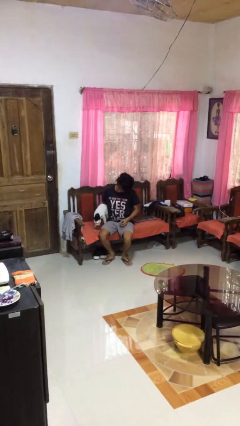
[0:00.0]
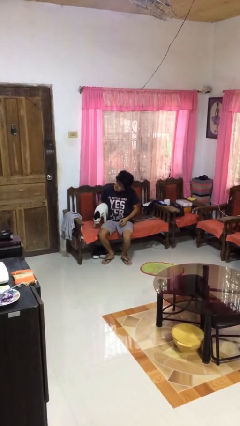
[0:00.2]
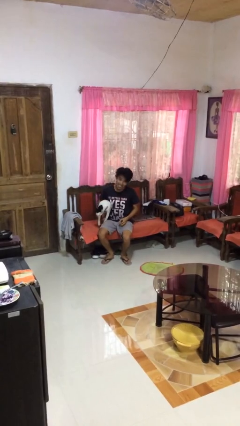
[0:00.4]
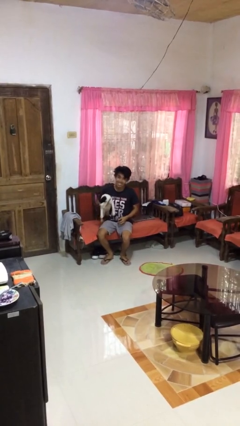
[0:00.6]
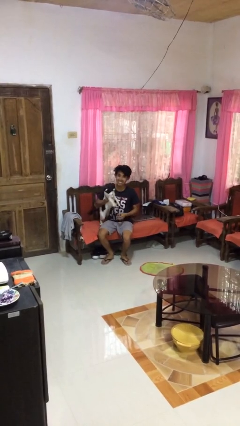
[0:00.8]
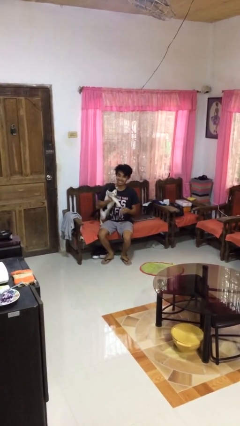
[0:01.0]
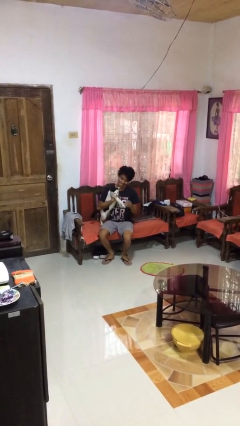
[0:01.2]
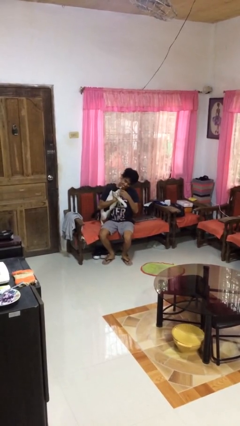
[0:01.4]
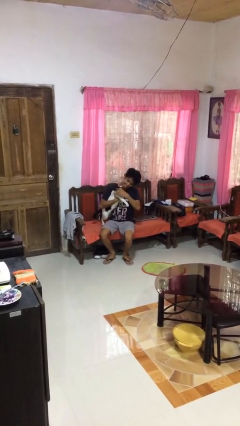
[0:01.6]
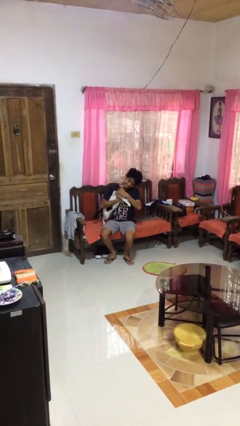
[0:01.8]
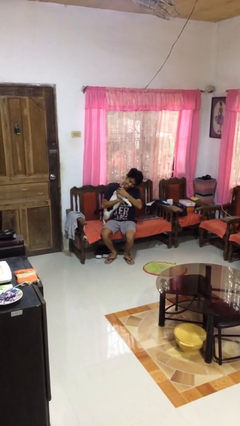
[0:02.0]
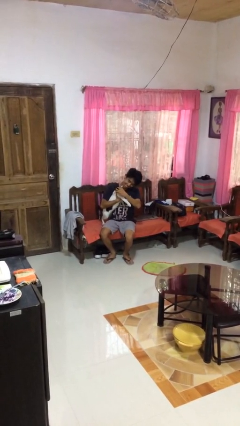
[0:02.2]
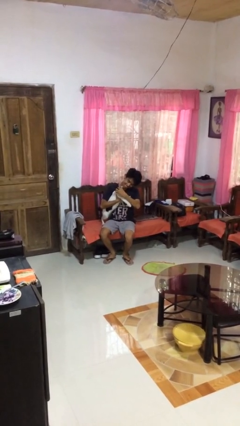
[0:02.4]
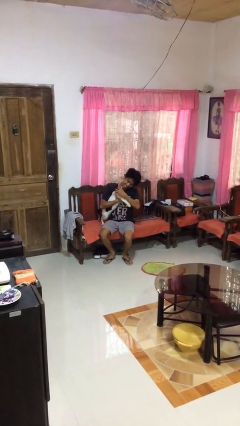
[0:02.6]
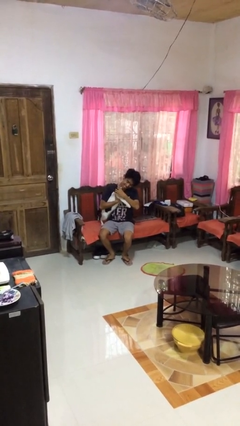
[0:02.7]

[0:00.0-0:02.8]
person hugs cat

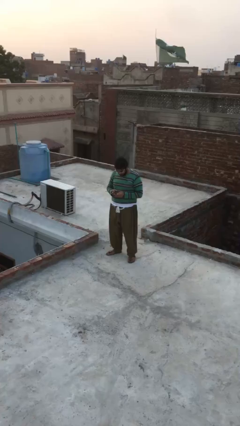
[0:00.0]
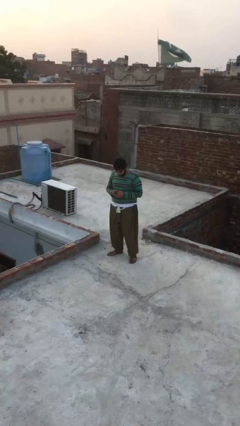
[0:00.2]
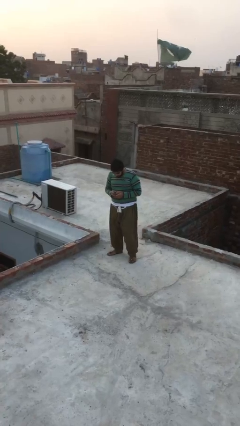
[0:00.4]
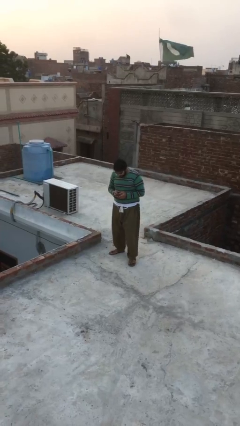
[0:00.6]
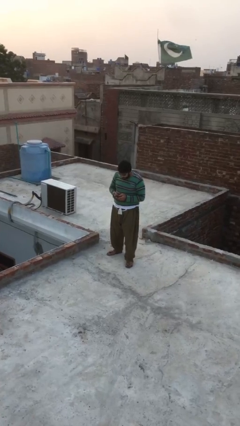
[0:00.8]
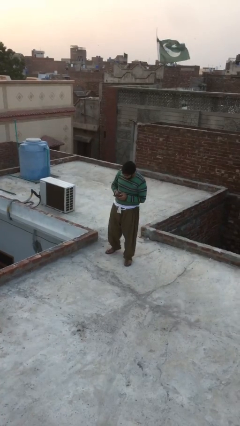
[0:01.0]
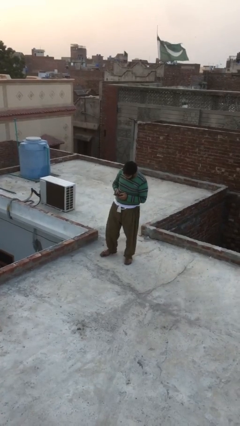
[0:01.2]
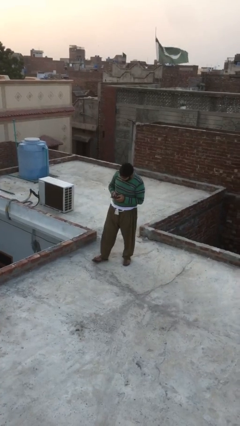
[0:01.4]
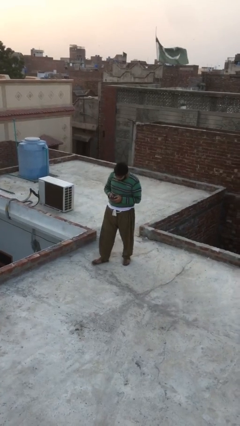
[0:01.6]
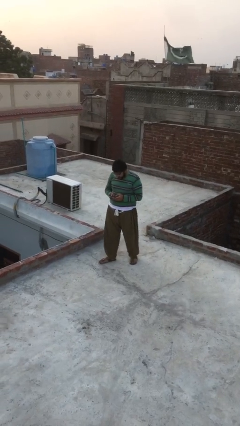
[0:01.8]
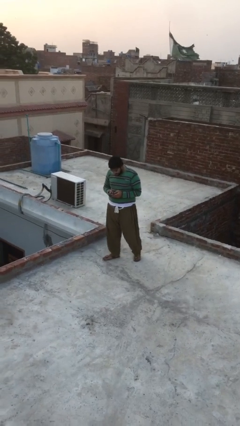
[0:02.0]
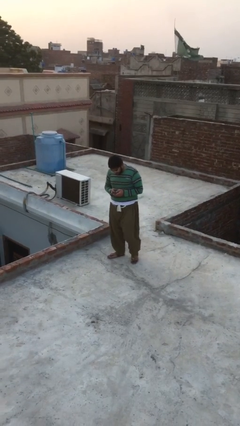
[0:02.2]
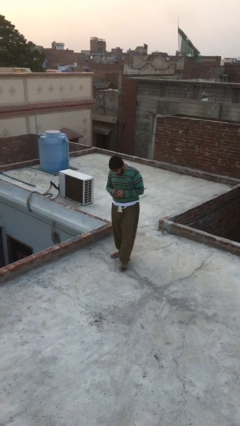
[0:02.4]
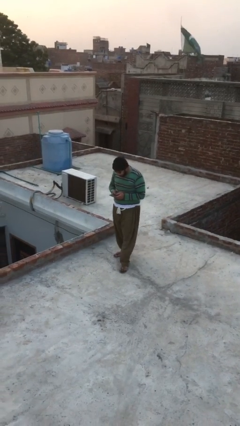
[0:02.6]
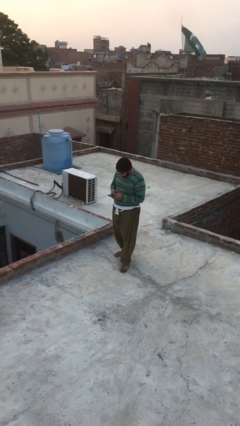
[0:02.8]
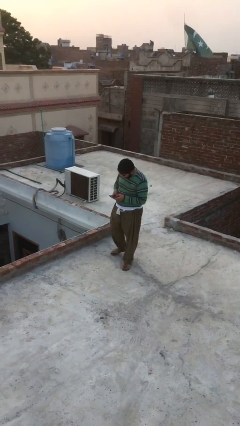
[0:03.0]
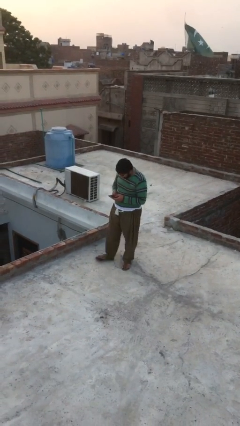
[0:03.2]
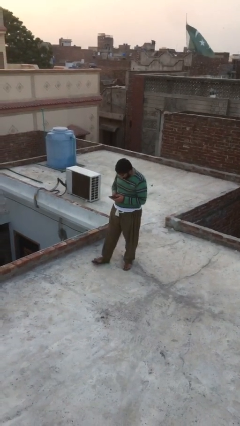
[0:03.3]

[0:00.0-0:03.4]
person texts on phone

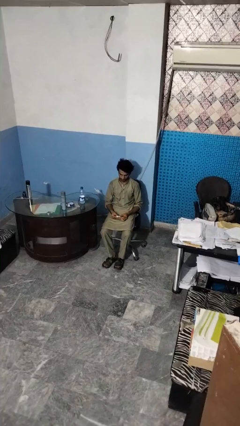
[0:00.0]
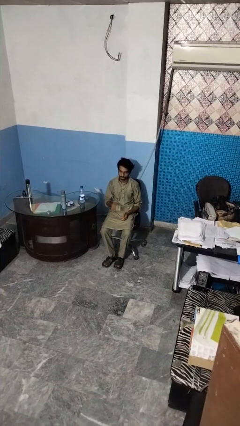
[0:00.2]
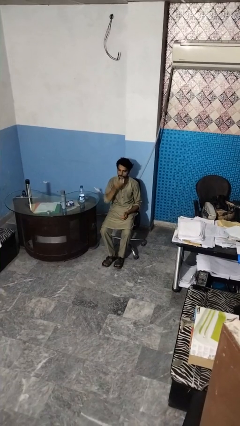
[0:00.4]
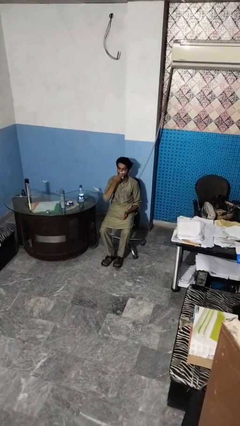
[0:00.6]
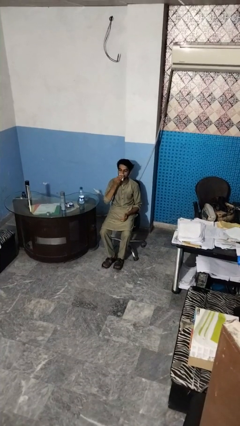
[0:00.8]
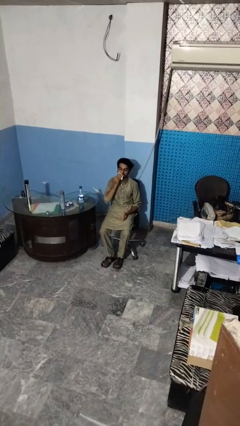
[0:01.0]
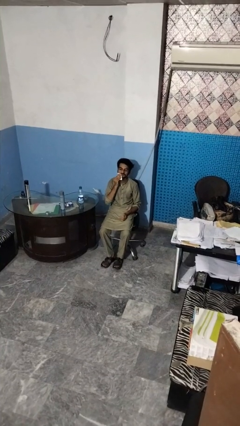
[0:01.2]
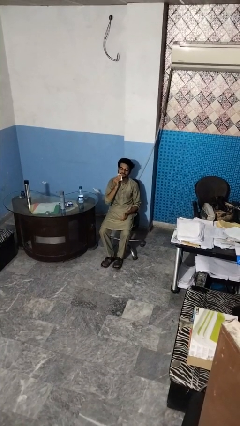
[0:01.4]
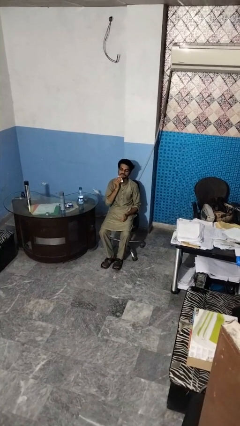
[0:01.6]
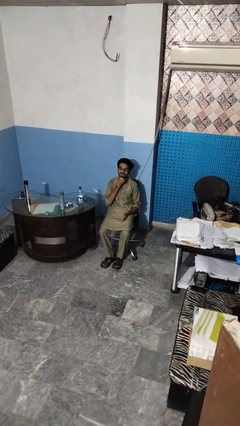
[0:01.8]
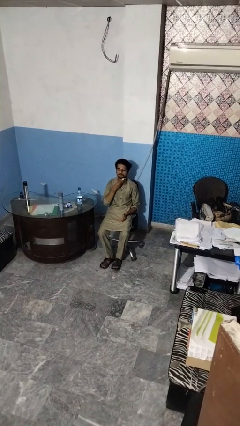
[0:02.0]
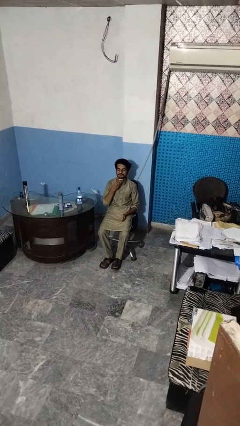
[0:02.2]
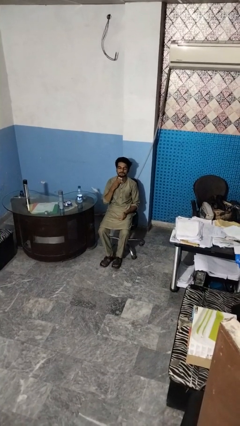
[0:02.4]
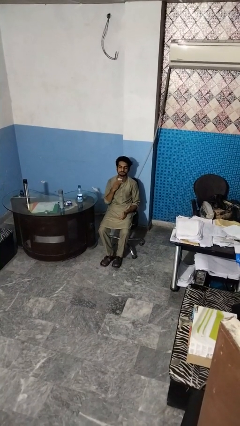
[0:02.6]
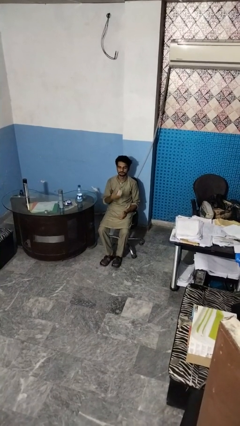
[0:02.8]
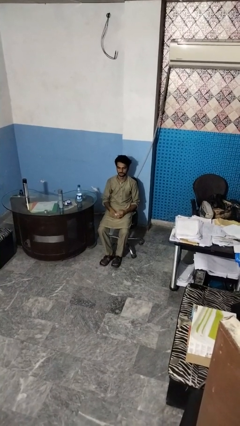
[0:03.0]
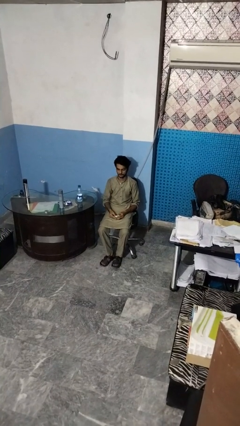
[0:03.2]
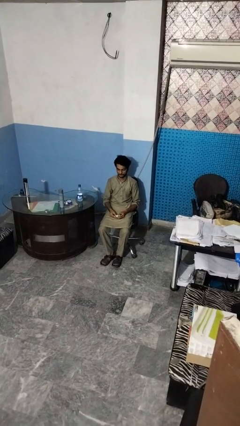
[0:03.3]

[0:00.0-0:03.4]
person wipes mouth with napkin

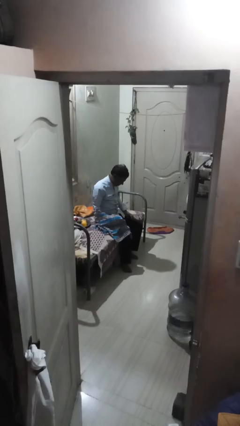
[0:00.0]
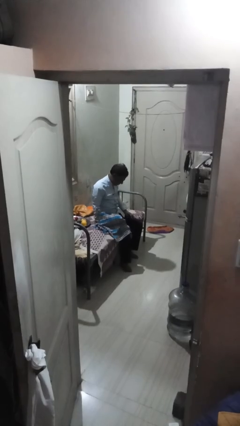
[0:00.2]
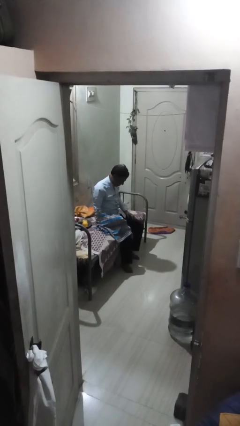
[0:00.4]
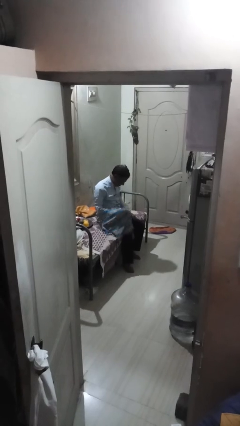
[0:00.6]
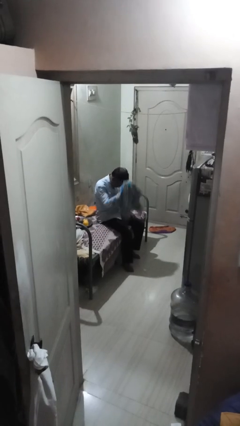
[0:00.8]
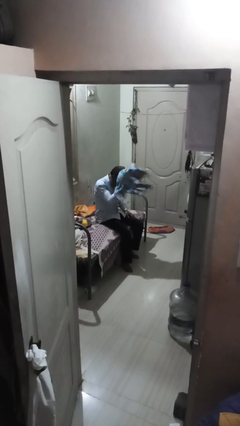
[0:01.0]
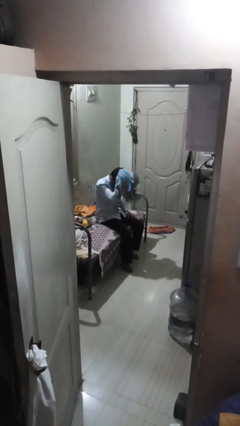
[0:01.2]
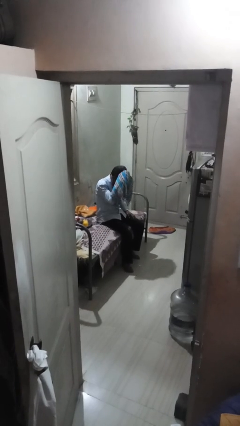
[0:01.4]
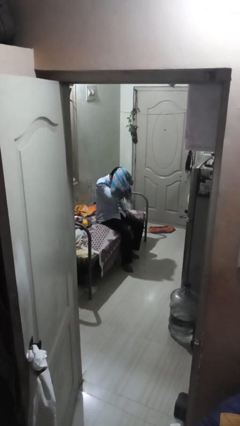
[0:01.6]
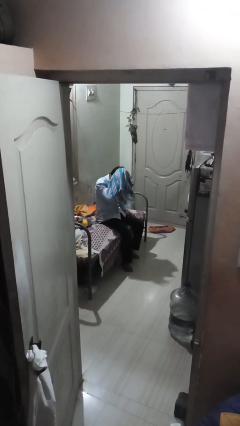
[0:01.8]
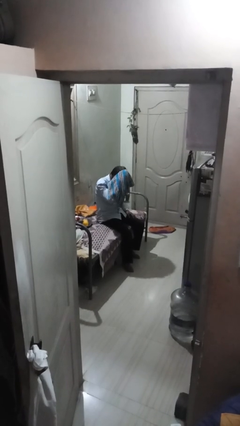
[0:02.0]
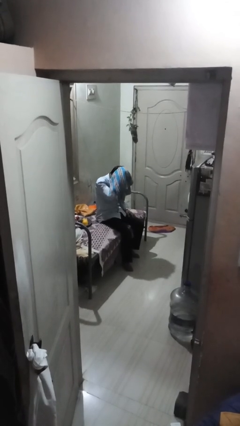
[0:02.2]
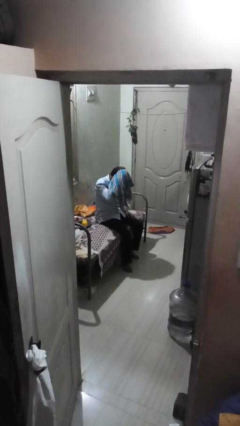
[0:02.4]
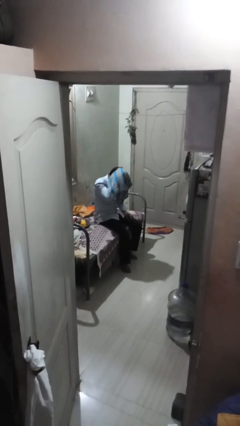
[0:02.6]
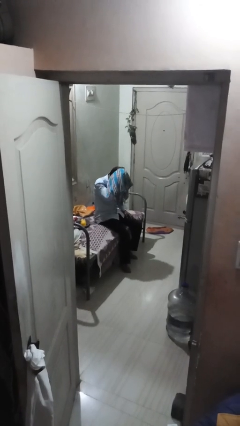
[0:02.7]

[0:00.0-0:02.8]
person dries hair with towel

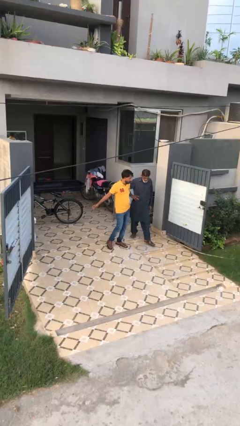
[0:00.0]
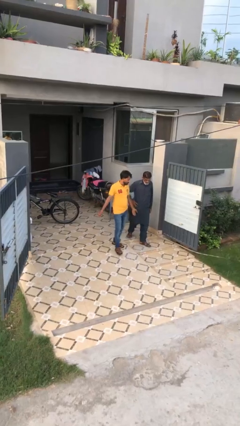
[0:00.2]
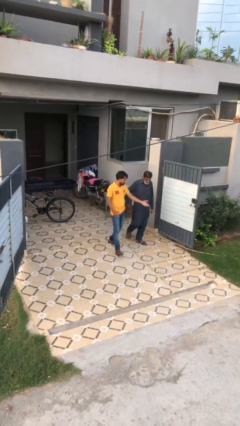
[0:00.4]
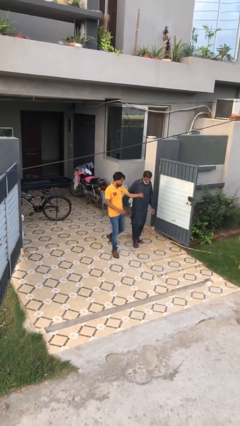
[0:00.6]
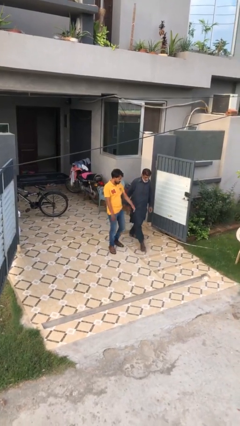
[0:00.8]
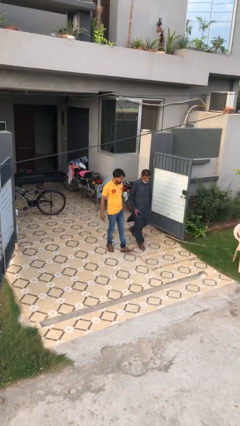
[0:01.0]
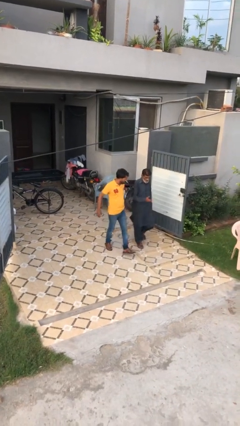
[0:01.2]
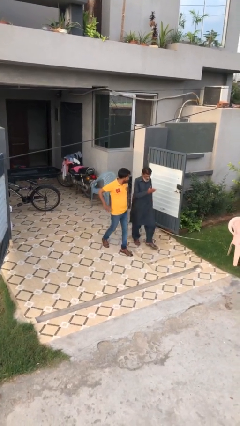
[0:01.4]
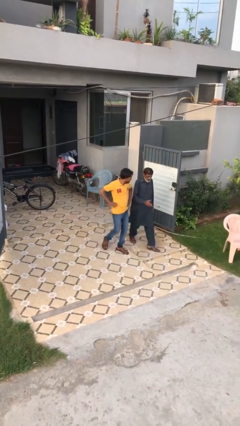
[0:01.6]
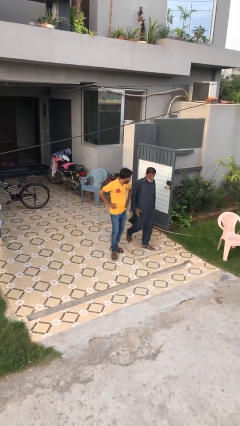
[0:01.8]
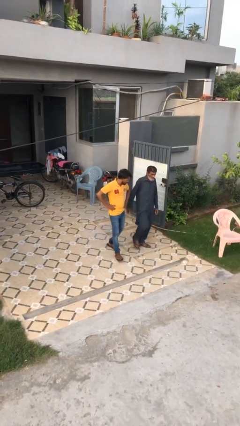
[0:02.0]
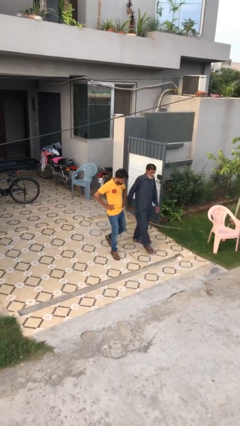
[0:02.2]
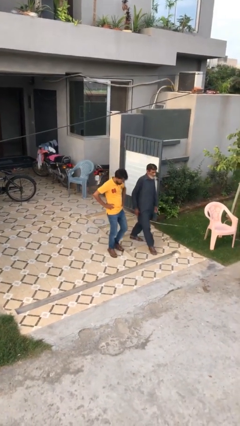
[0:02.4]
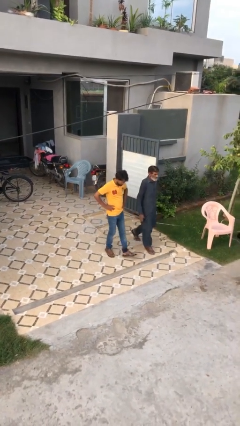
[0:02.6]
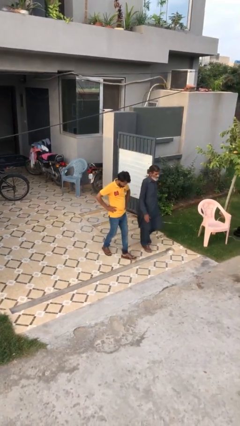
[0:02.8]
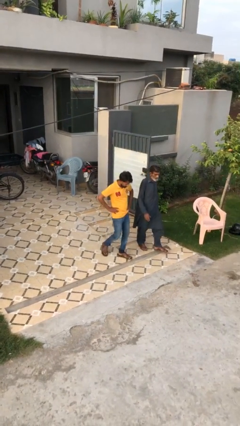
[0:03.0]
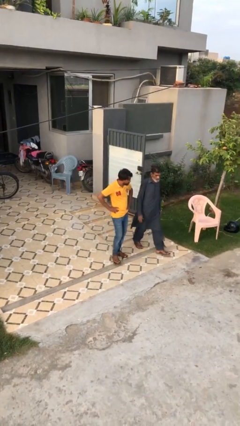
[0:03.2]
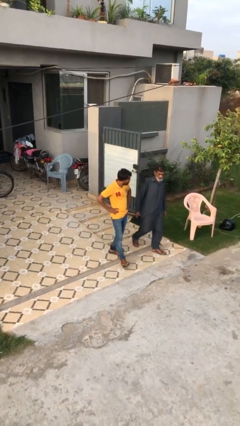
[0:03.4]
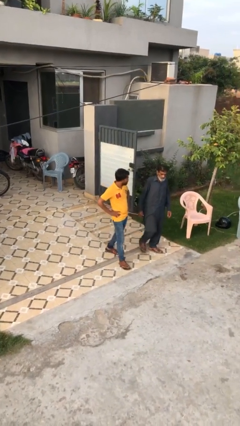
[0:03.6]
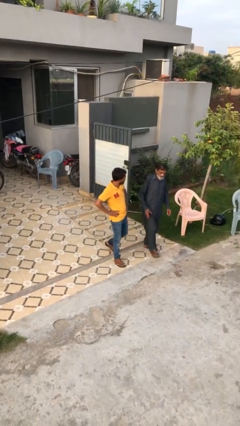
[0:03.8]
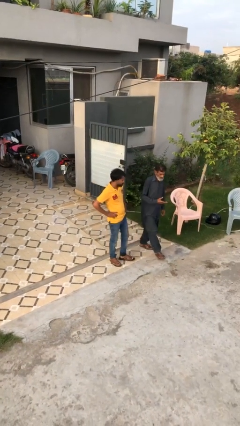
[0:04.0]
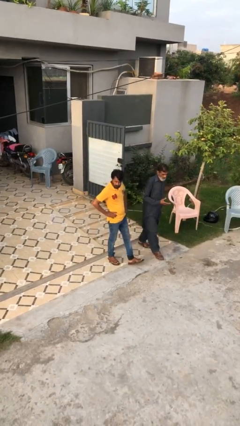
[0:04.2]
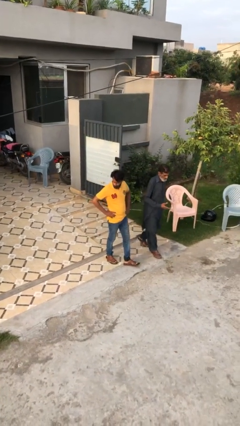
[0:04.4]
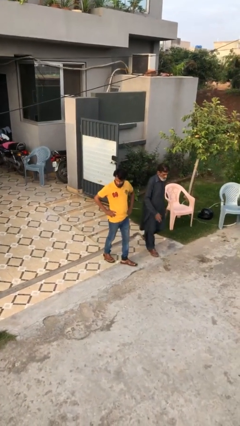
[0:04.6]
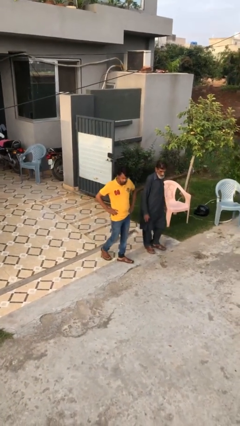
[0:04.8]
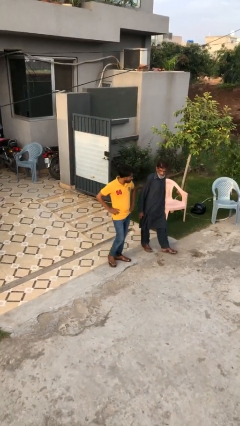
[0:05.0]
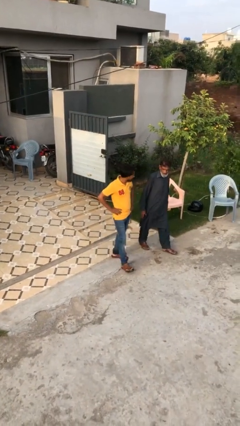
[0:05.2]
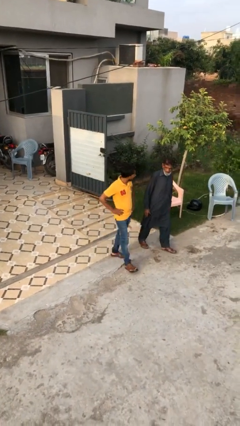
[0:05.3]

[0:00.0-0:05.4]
person talks to person
